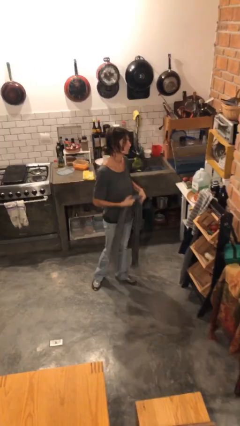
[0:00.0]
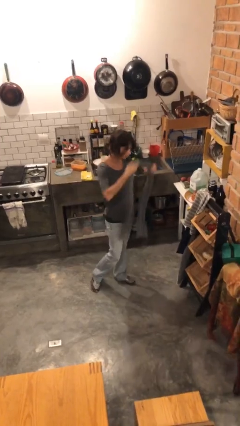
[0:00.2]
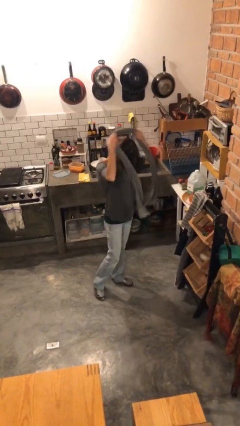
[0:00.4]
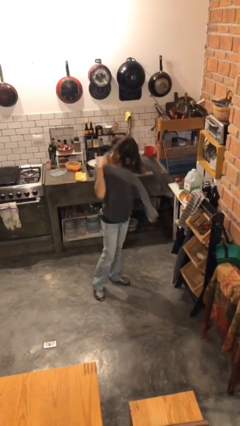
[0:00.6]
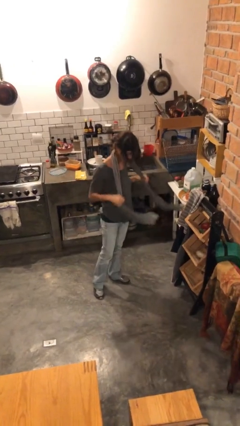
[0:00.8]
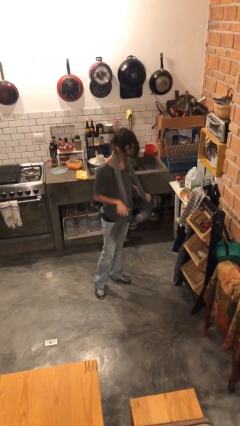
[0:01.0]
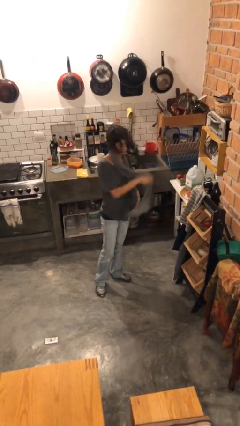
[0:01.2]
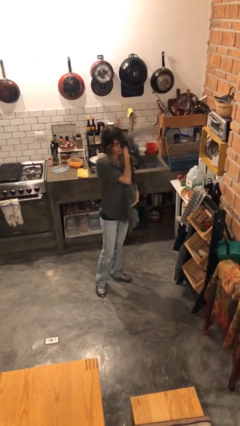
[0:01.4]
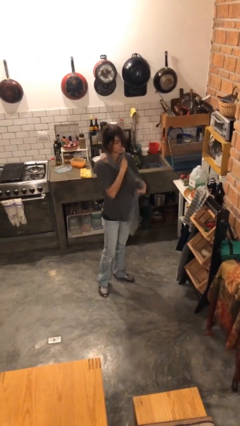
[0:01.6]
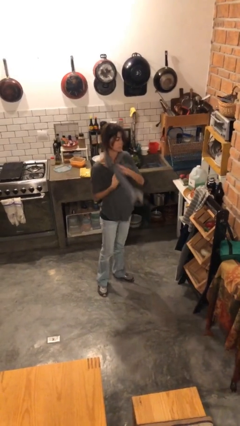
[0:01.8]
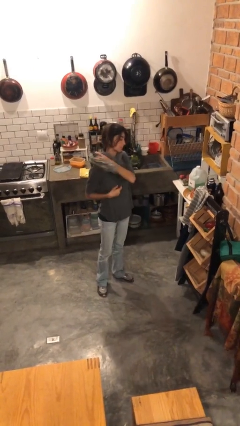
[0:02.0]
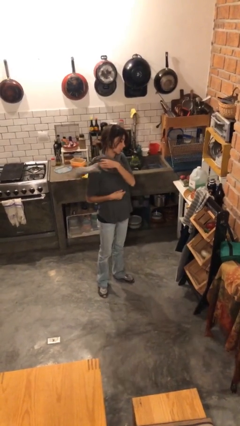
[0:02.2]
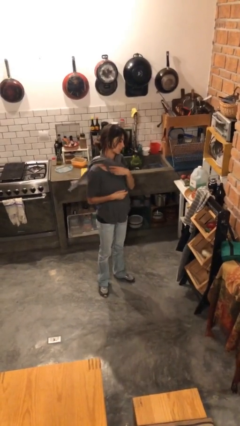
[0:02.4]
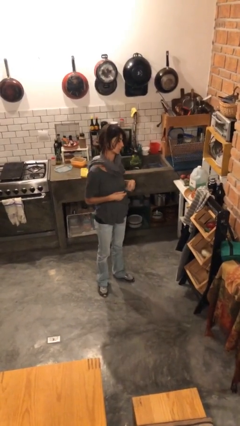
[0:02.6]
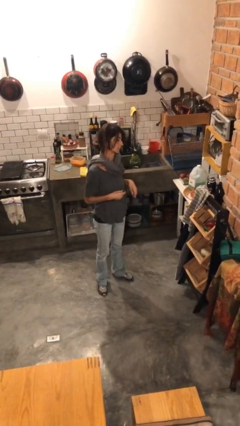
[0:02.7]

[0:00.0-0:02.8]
person puts on scarf

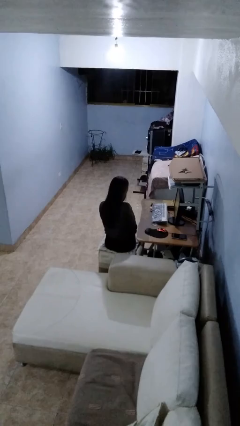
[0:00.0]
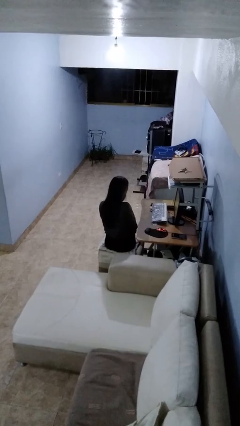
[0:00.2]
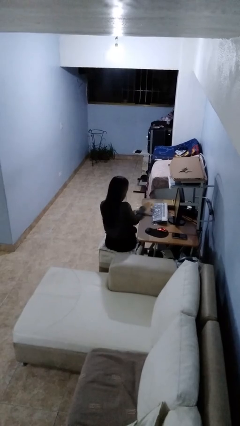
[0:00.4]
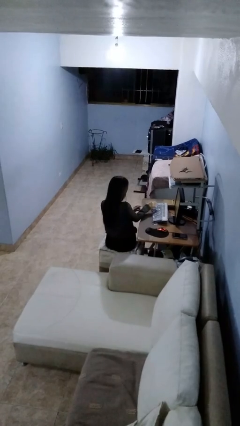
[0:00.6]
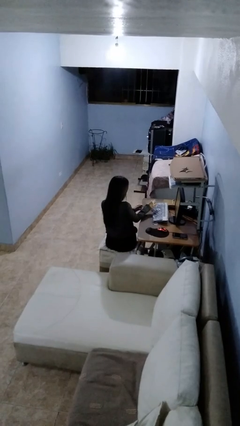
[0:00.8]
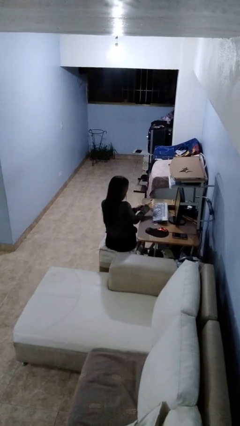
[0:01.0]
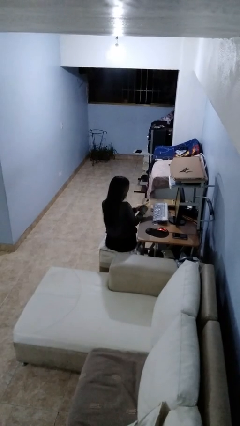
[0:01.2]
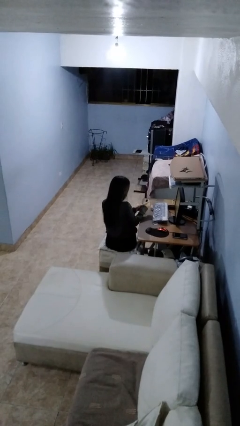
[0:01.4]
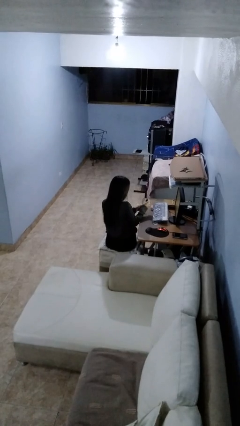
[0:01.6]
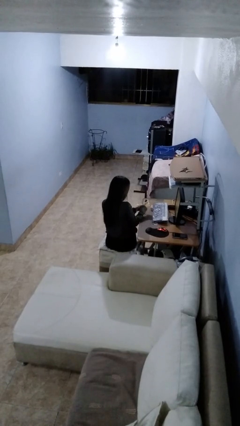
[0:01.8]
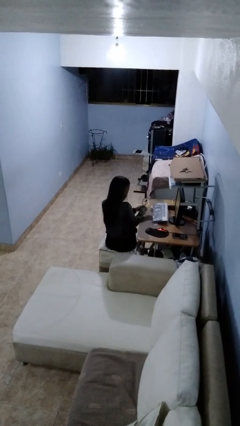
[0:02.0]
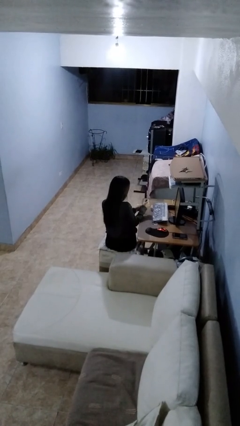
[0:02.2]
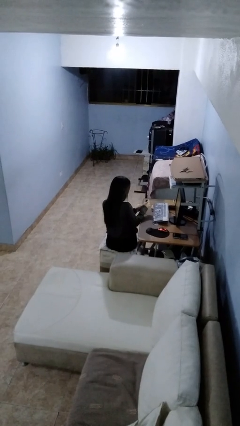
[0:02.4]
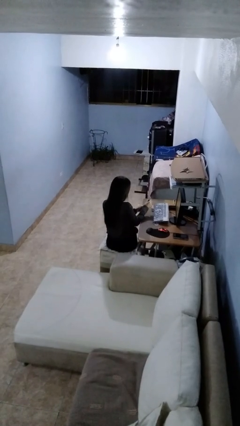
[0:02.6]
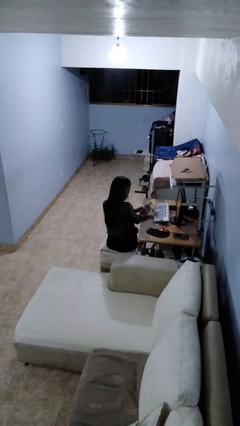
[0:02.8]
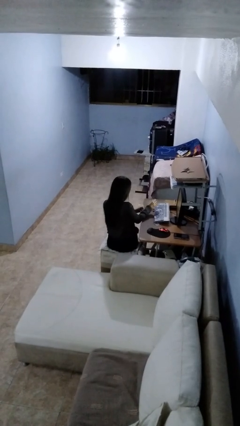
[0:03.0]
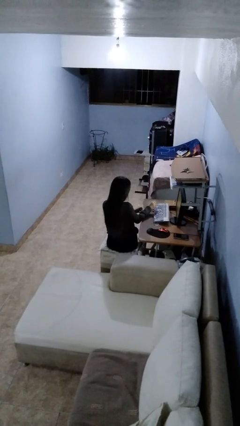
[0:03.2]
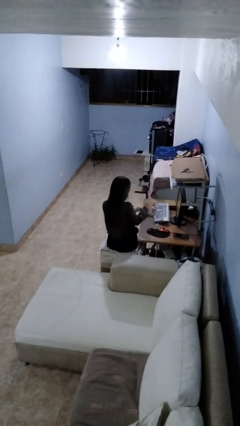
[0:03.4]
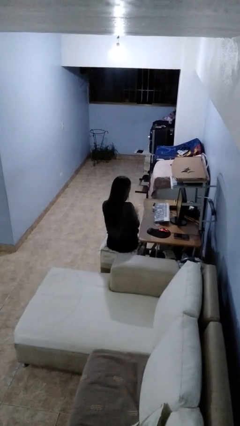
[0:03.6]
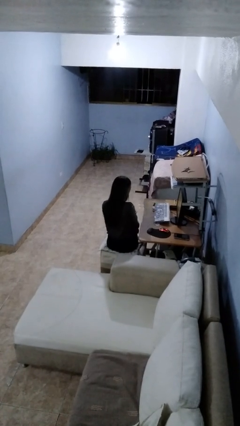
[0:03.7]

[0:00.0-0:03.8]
person paints fingernails

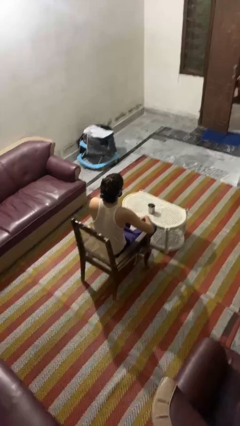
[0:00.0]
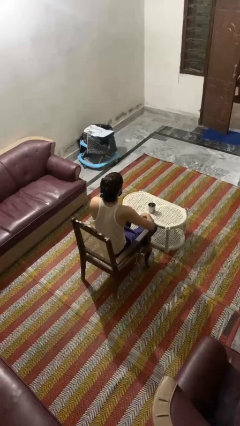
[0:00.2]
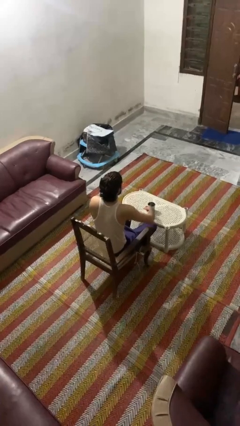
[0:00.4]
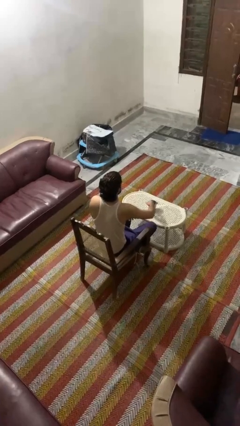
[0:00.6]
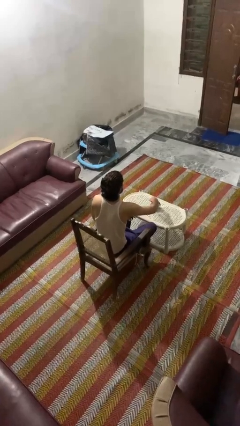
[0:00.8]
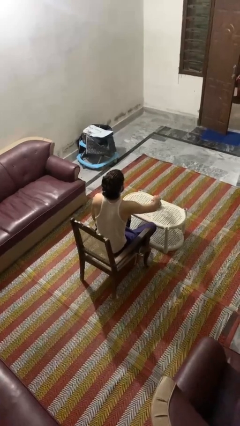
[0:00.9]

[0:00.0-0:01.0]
person knocks over furniture

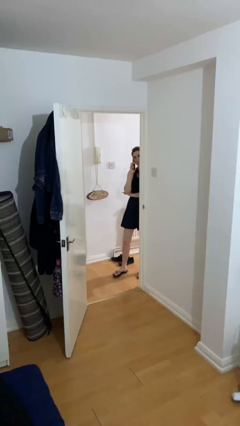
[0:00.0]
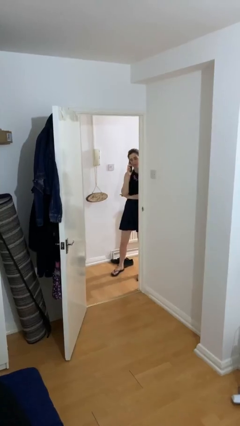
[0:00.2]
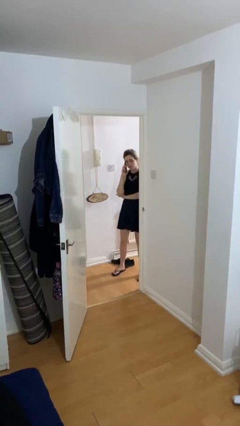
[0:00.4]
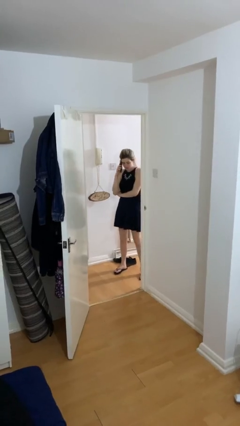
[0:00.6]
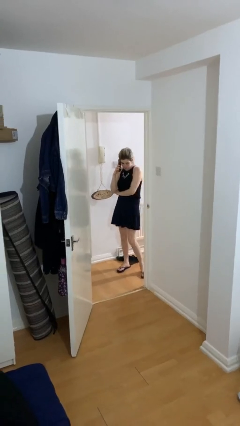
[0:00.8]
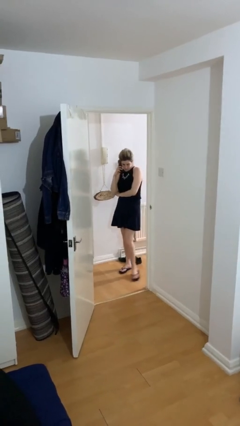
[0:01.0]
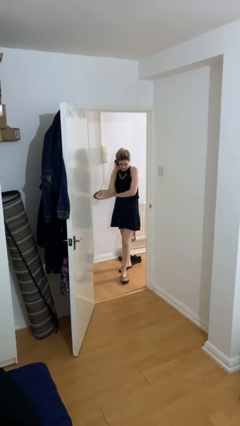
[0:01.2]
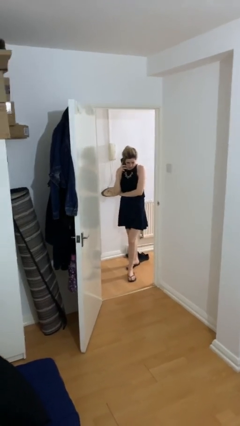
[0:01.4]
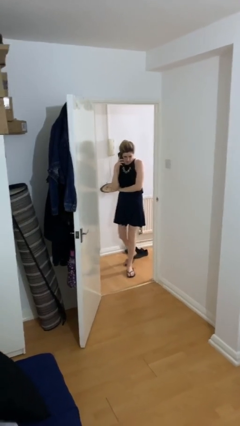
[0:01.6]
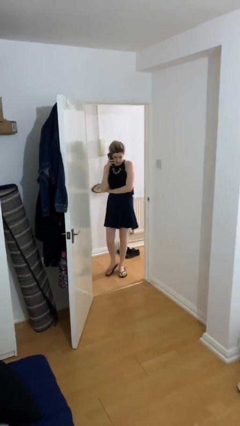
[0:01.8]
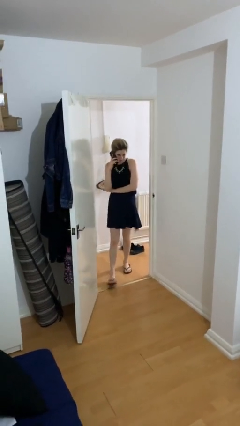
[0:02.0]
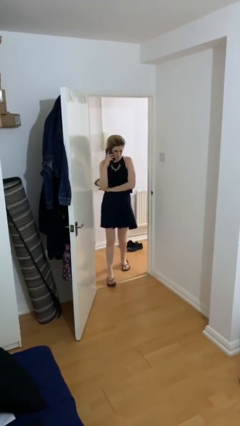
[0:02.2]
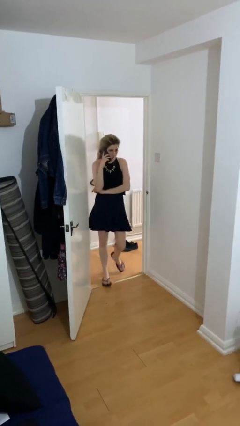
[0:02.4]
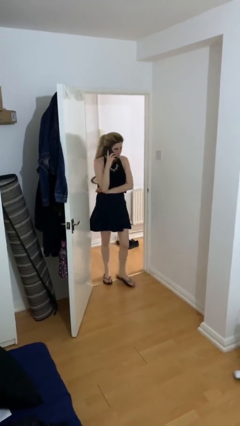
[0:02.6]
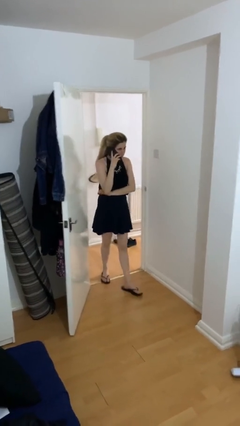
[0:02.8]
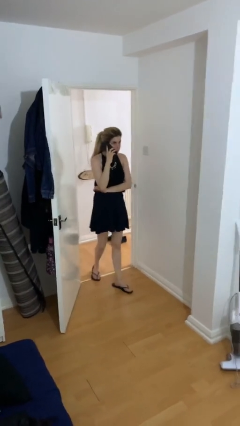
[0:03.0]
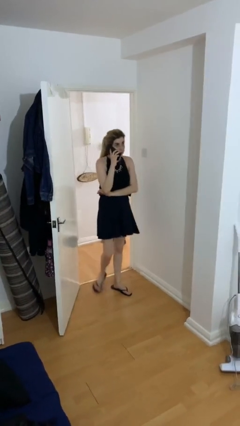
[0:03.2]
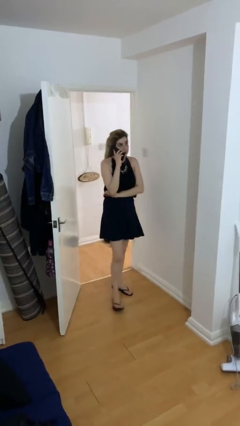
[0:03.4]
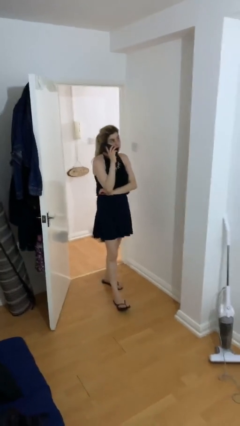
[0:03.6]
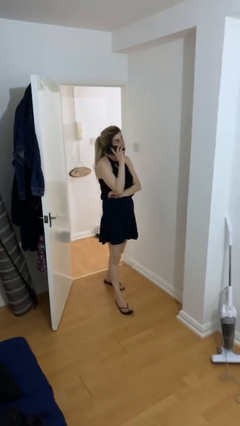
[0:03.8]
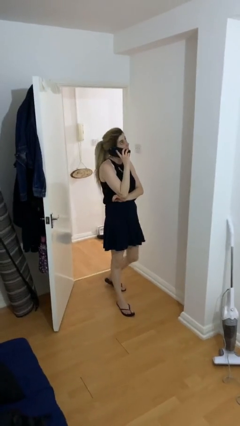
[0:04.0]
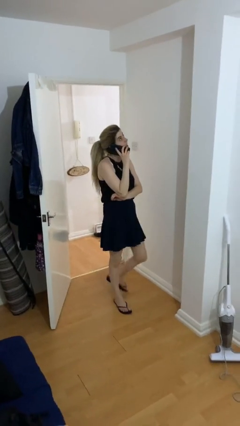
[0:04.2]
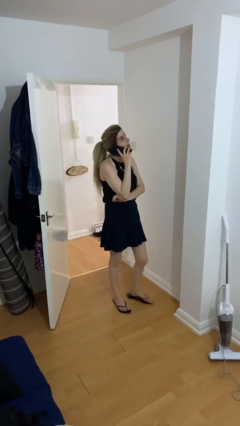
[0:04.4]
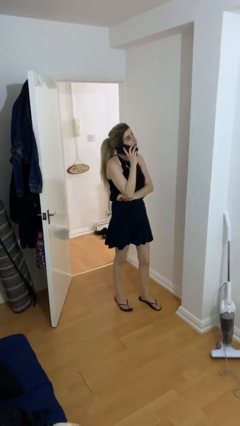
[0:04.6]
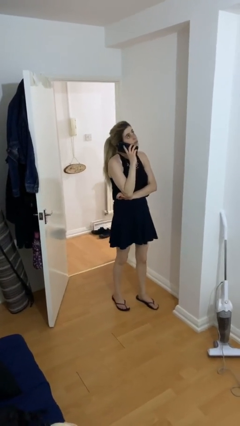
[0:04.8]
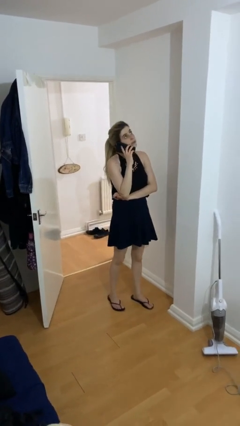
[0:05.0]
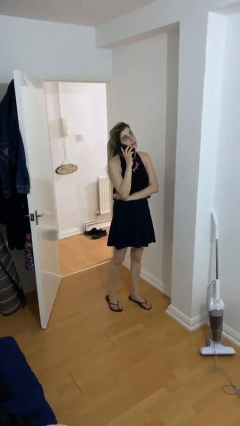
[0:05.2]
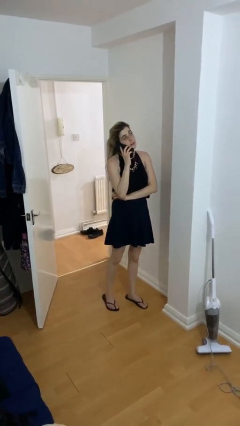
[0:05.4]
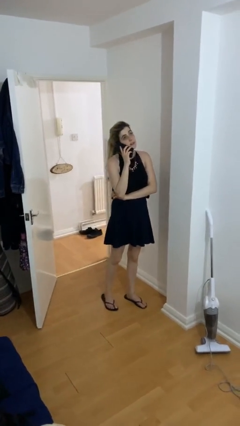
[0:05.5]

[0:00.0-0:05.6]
person enters scene through structure

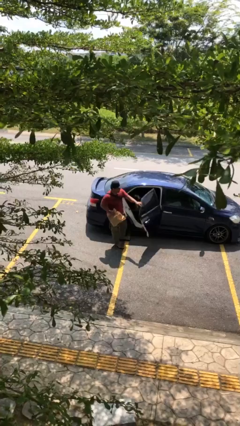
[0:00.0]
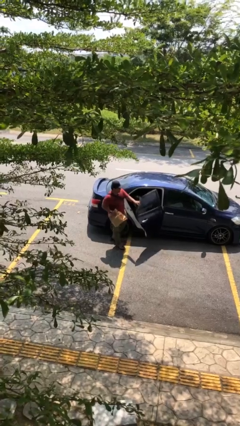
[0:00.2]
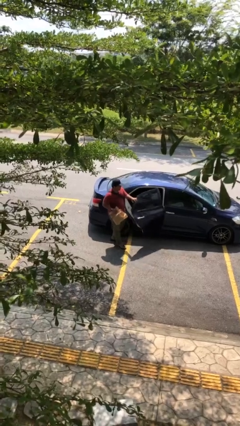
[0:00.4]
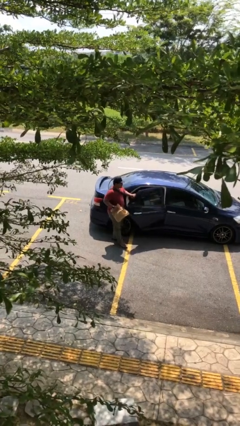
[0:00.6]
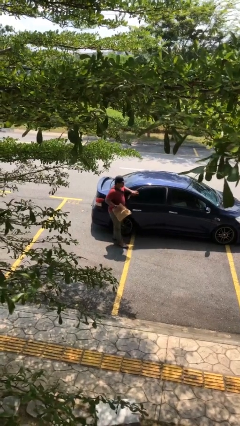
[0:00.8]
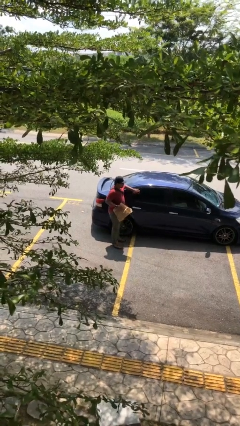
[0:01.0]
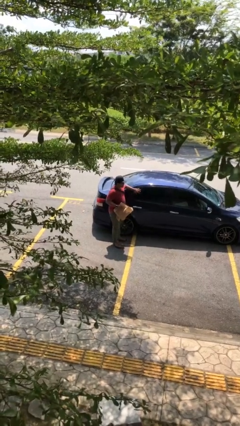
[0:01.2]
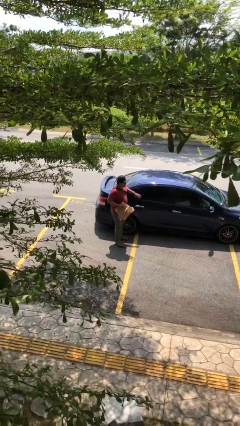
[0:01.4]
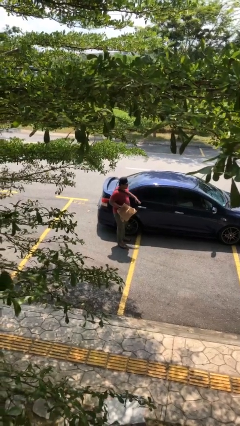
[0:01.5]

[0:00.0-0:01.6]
person closes car door

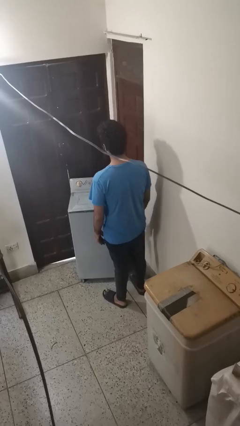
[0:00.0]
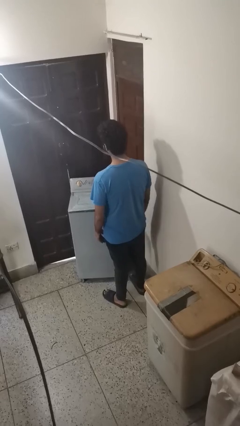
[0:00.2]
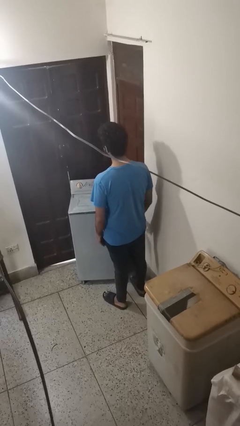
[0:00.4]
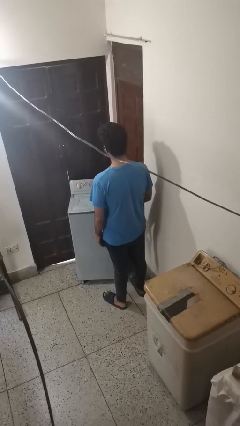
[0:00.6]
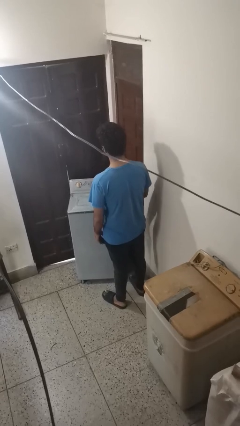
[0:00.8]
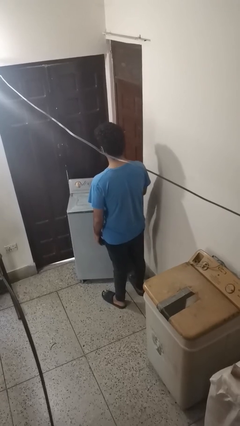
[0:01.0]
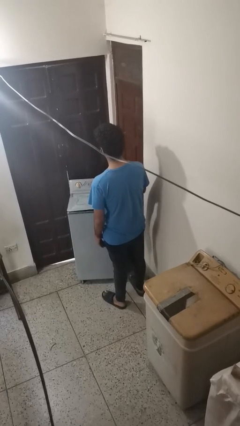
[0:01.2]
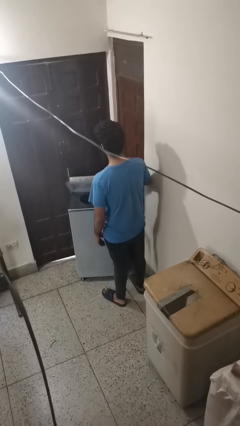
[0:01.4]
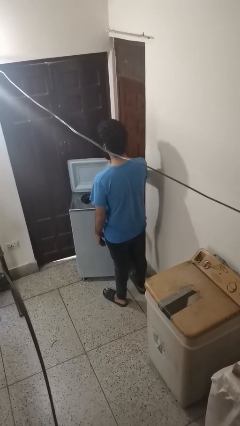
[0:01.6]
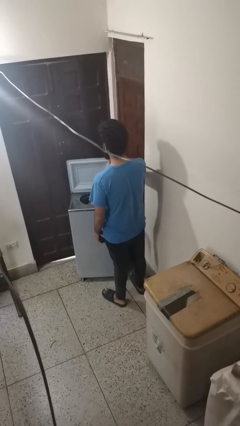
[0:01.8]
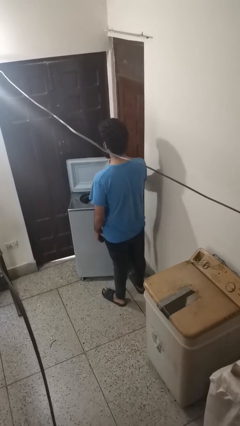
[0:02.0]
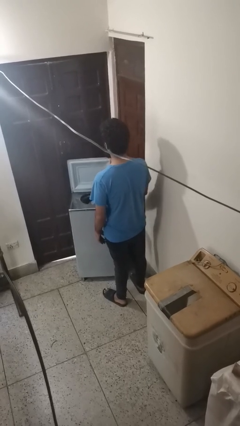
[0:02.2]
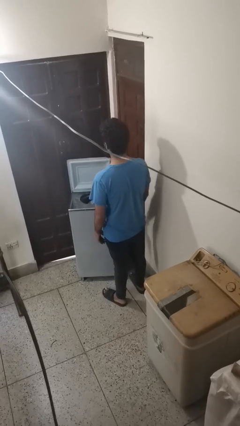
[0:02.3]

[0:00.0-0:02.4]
person opens clothes washer

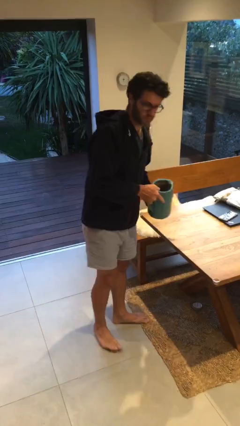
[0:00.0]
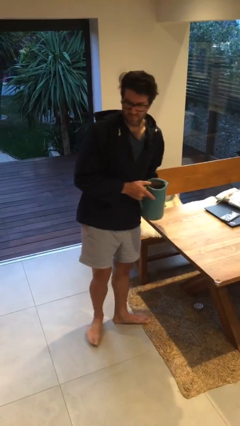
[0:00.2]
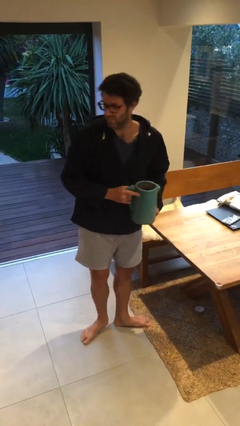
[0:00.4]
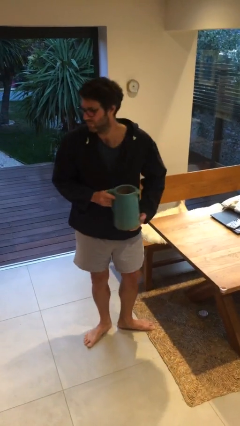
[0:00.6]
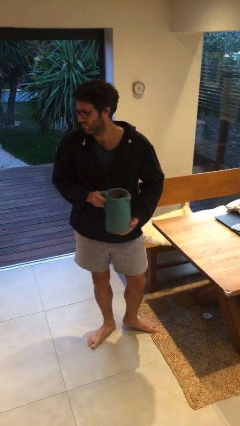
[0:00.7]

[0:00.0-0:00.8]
person picks up object from table
